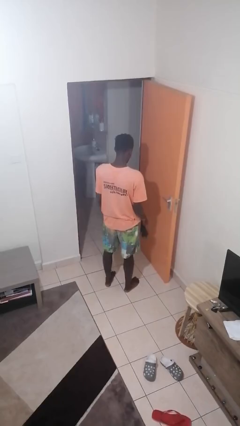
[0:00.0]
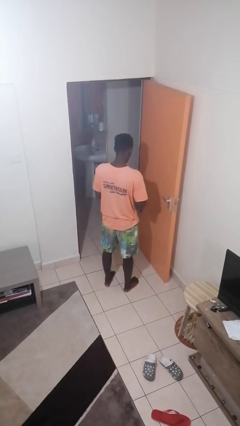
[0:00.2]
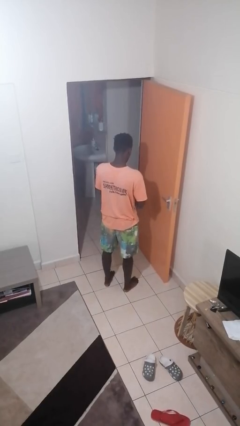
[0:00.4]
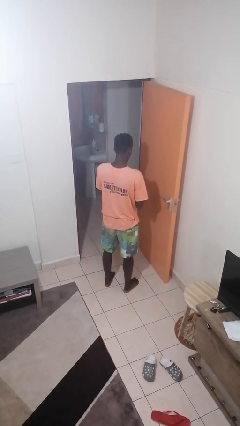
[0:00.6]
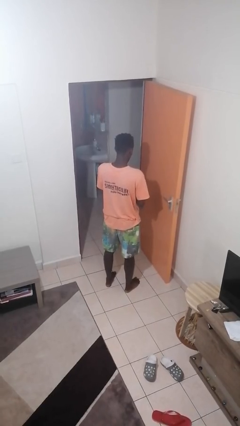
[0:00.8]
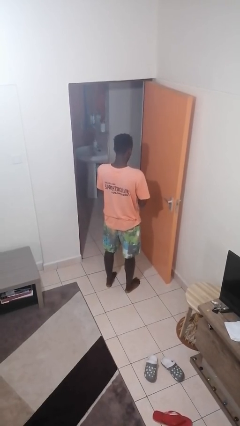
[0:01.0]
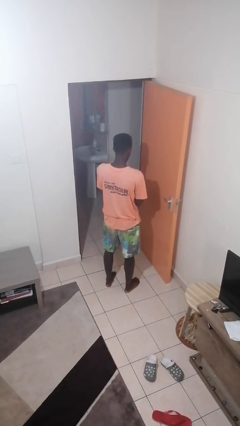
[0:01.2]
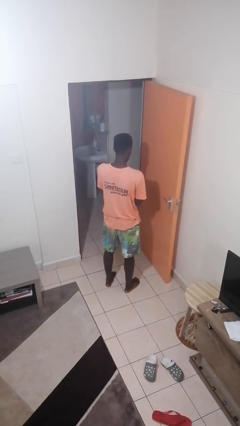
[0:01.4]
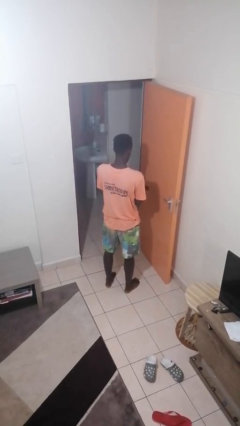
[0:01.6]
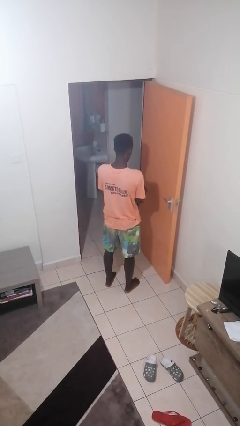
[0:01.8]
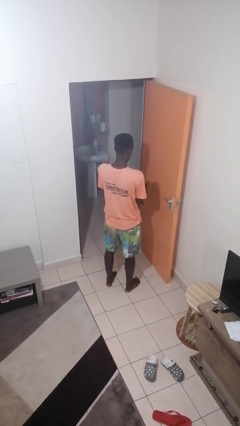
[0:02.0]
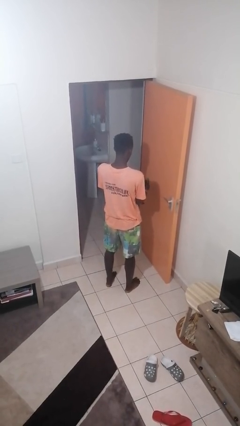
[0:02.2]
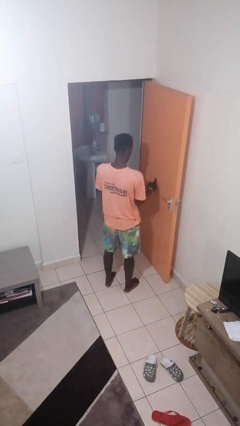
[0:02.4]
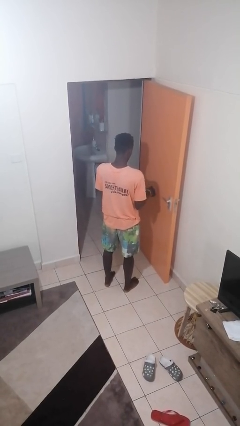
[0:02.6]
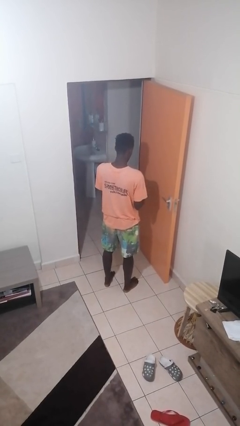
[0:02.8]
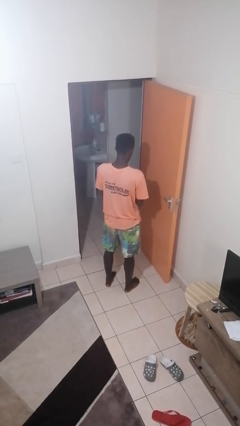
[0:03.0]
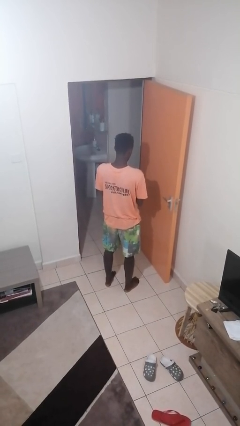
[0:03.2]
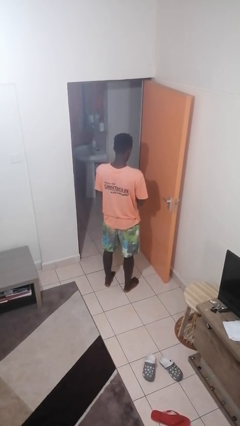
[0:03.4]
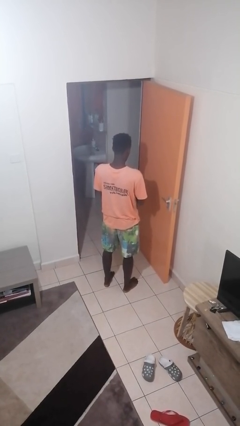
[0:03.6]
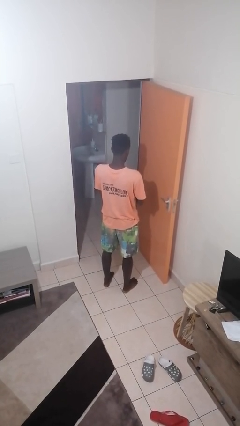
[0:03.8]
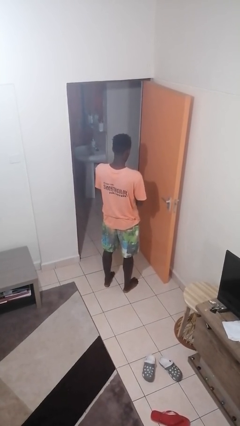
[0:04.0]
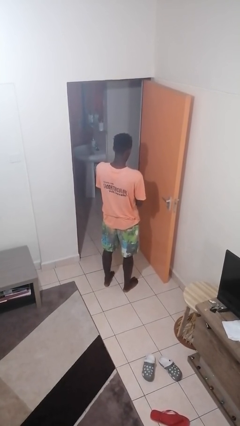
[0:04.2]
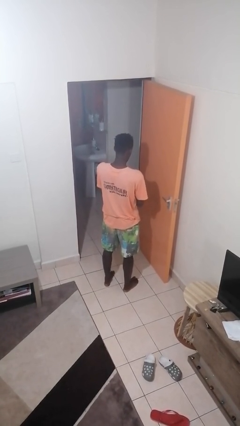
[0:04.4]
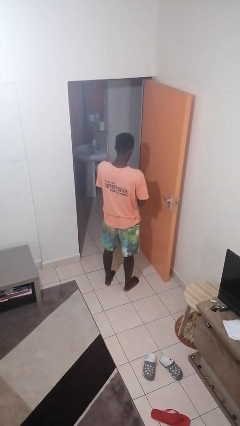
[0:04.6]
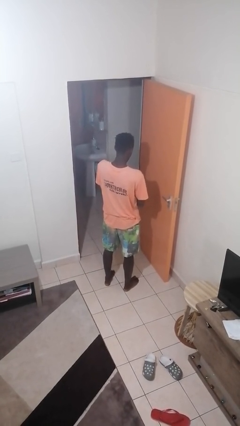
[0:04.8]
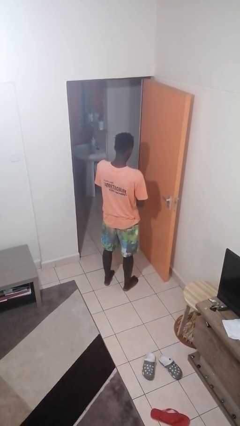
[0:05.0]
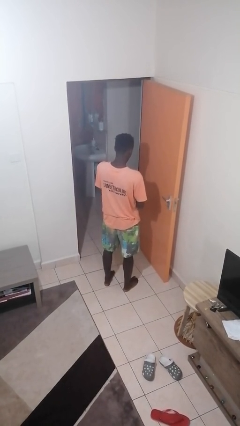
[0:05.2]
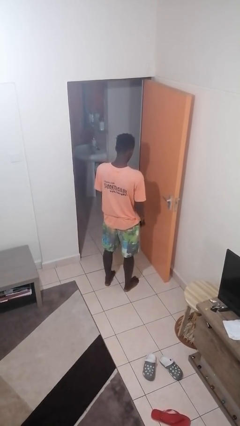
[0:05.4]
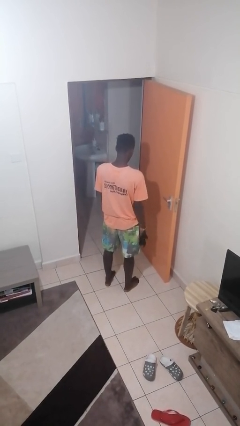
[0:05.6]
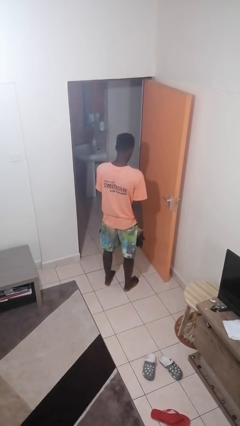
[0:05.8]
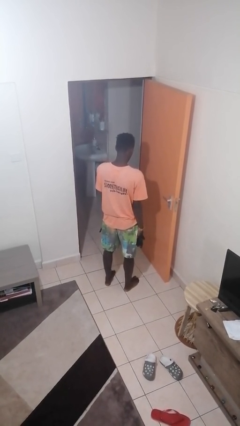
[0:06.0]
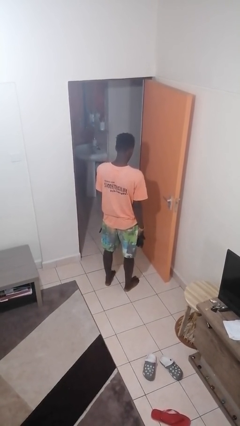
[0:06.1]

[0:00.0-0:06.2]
person puts on gloves

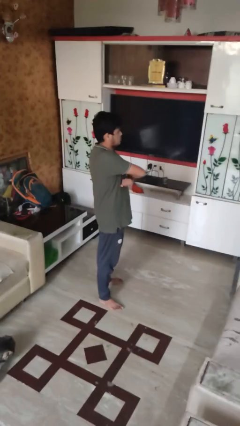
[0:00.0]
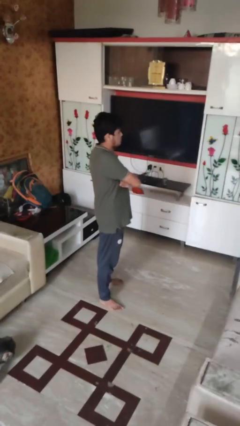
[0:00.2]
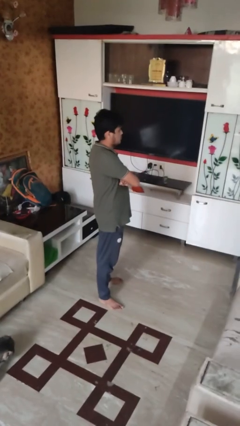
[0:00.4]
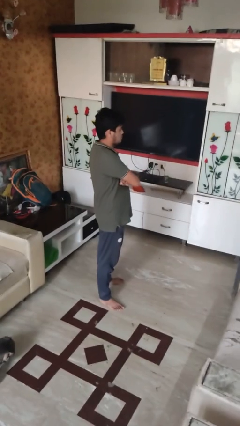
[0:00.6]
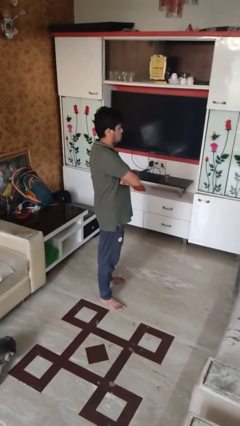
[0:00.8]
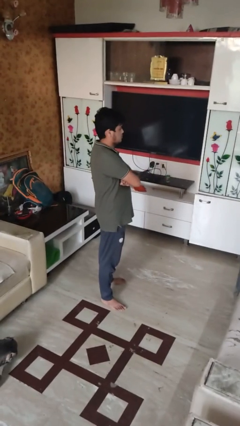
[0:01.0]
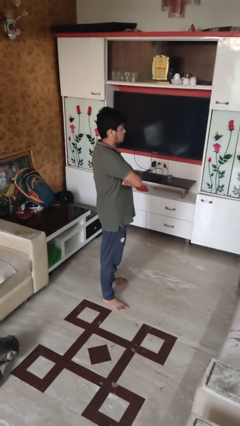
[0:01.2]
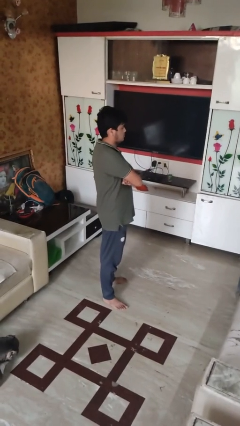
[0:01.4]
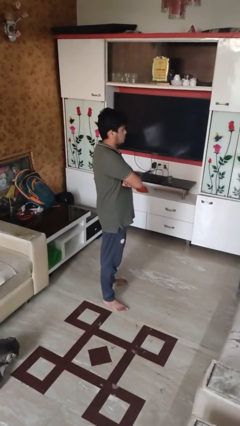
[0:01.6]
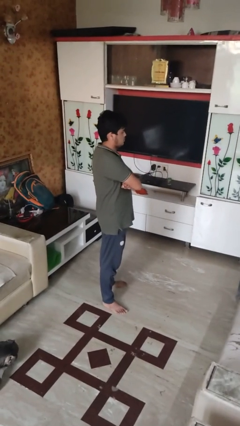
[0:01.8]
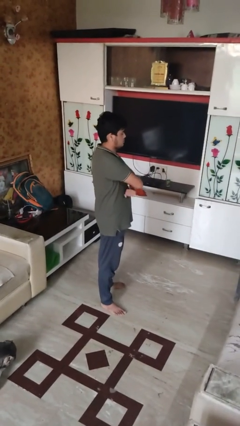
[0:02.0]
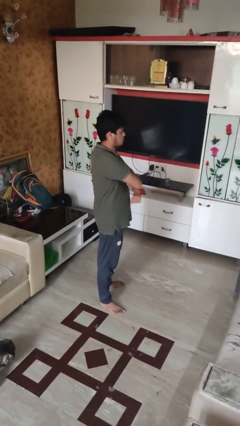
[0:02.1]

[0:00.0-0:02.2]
person crosses arms

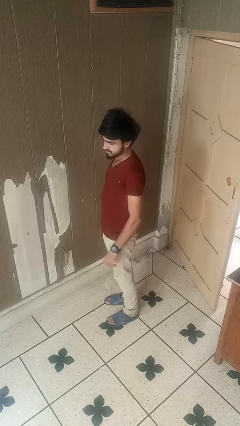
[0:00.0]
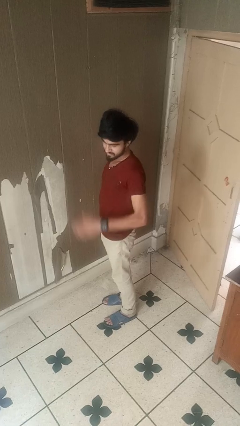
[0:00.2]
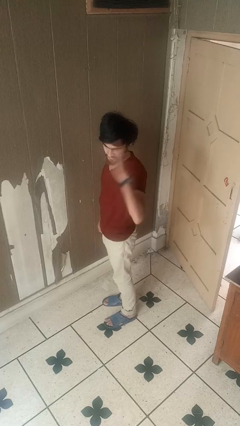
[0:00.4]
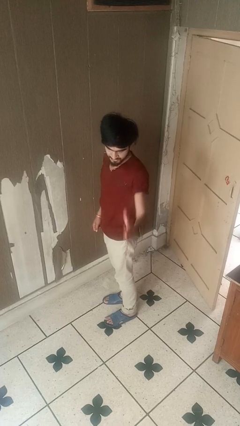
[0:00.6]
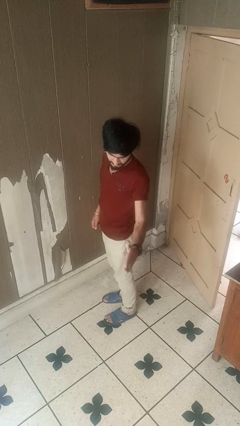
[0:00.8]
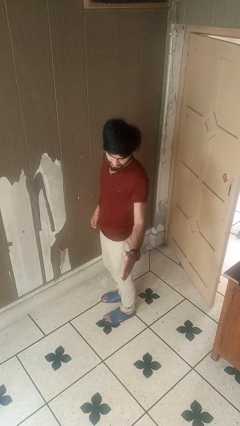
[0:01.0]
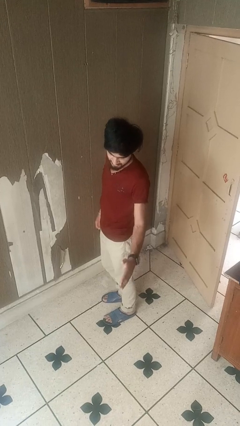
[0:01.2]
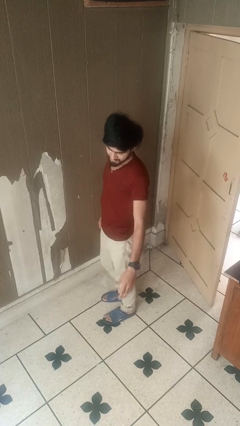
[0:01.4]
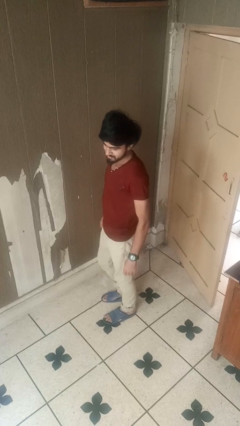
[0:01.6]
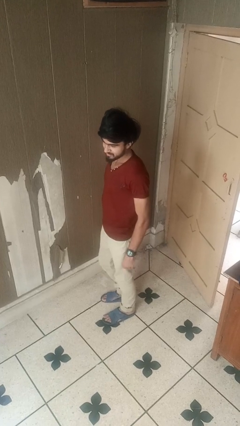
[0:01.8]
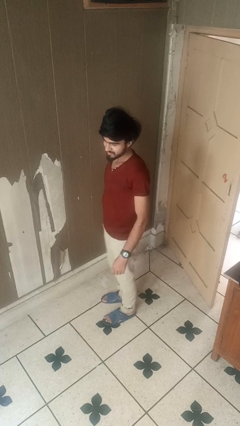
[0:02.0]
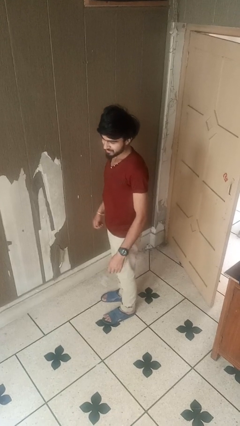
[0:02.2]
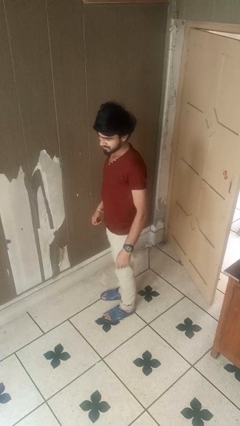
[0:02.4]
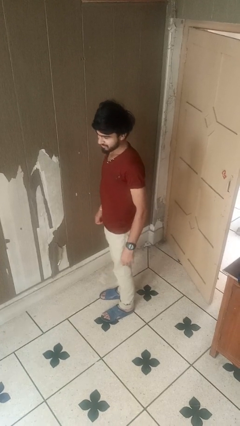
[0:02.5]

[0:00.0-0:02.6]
person karate chop

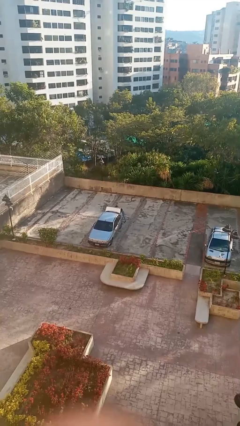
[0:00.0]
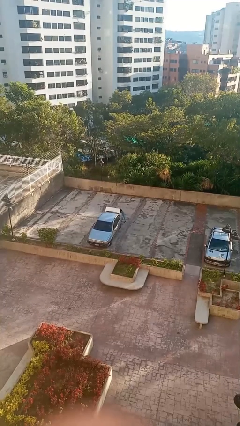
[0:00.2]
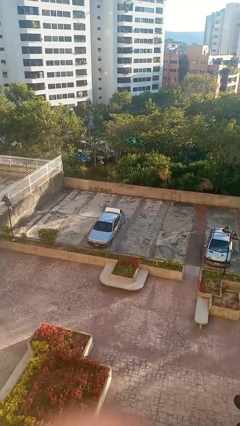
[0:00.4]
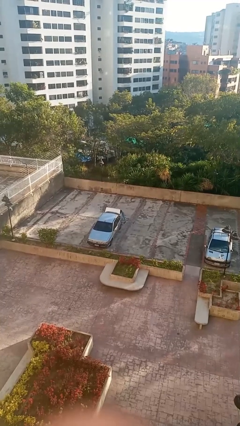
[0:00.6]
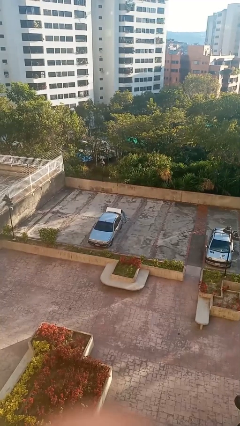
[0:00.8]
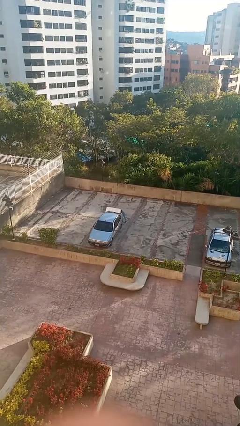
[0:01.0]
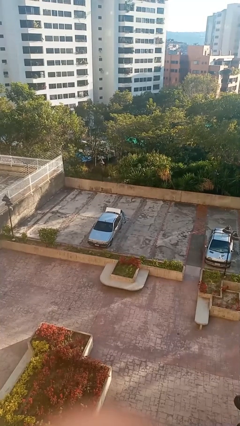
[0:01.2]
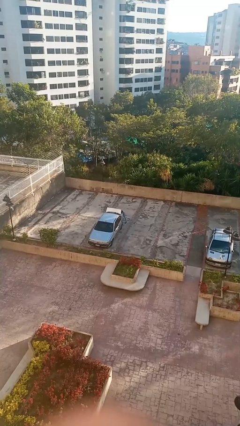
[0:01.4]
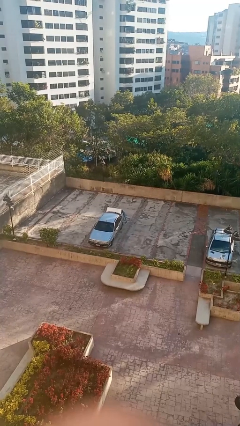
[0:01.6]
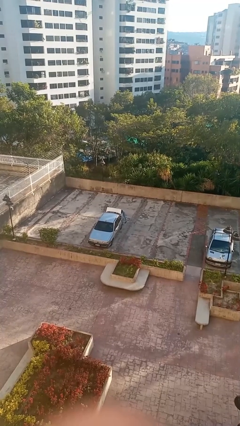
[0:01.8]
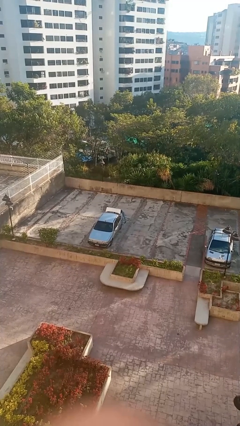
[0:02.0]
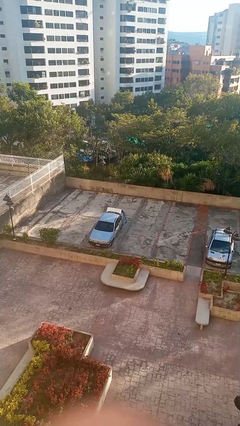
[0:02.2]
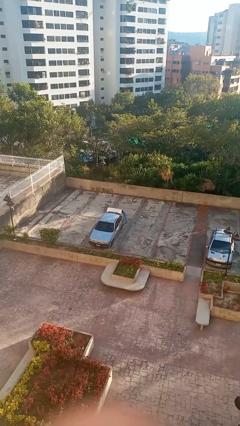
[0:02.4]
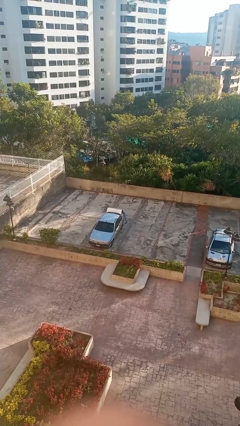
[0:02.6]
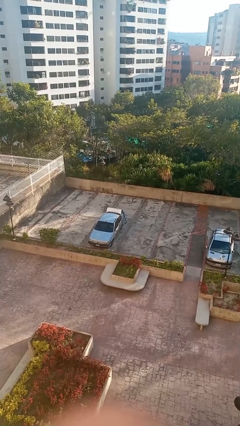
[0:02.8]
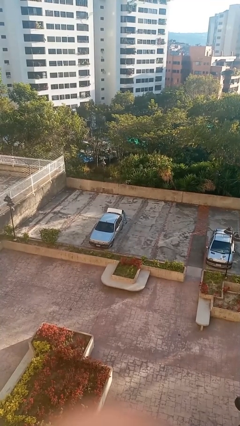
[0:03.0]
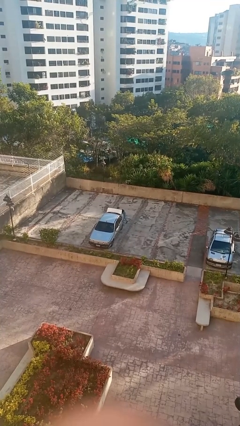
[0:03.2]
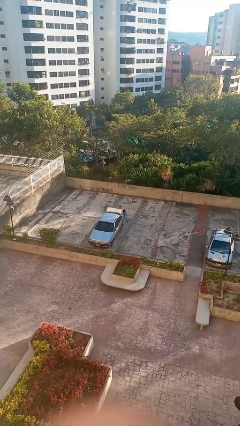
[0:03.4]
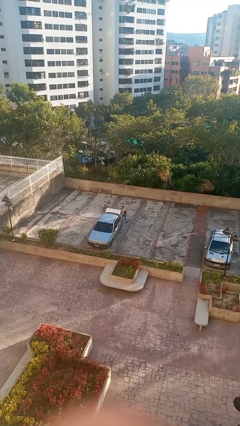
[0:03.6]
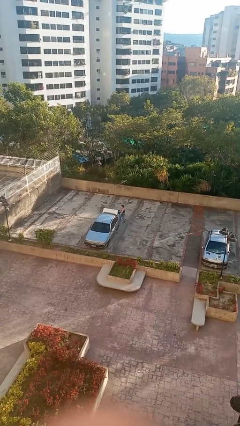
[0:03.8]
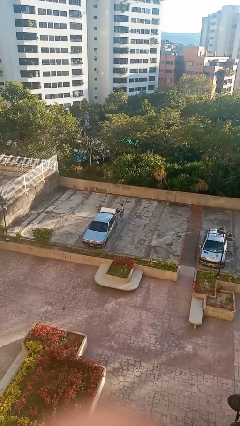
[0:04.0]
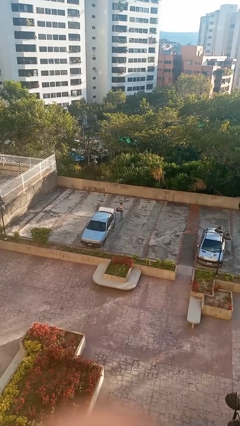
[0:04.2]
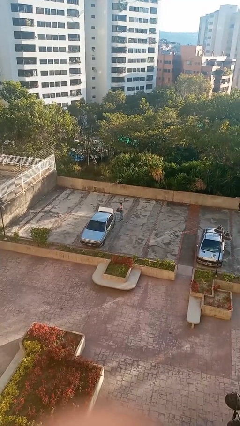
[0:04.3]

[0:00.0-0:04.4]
person unloads car

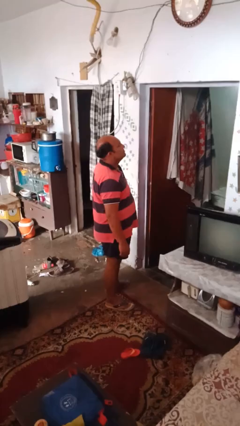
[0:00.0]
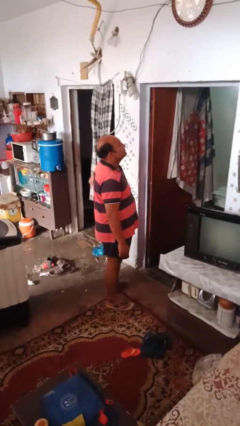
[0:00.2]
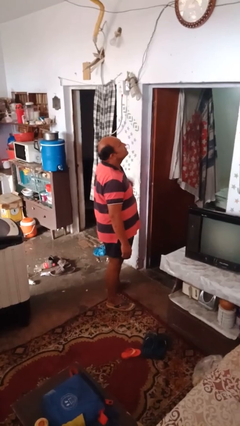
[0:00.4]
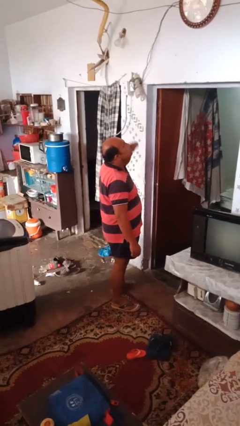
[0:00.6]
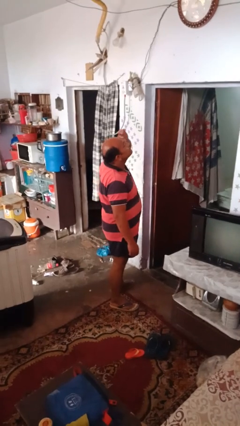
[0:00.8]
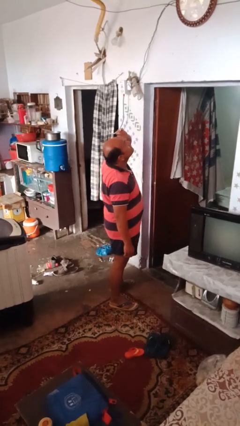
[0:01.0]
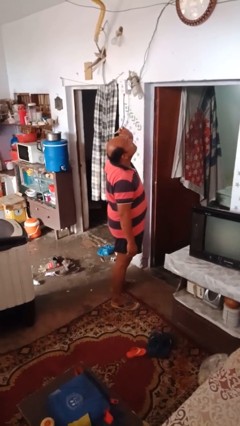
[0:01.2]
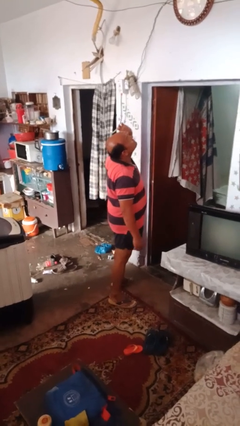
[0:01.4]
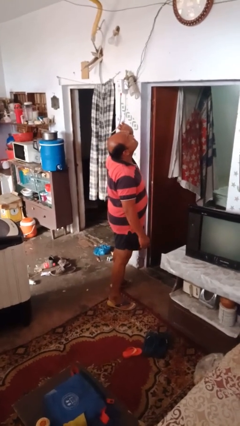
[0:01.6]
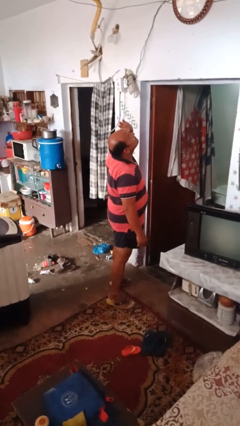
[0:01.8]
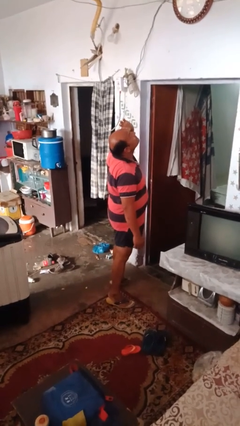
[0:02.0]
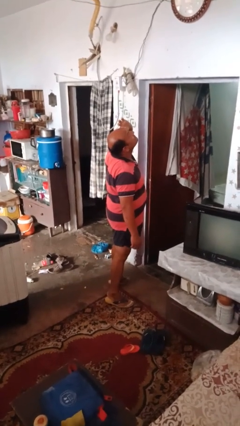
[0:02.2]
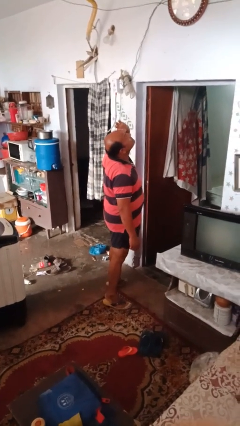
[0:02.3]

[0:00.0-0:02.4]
person gestures watch closely
